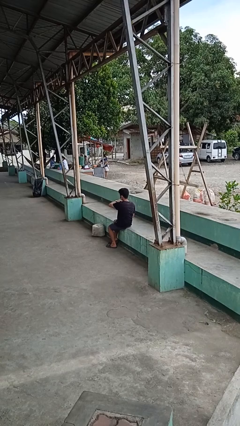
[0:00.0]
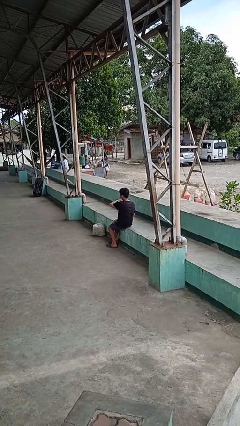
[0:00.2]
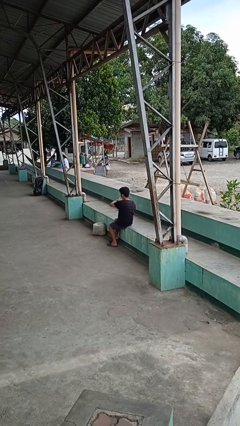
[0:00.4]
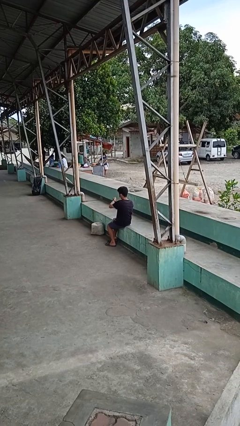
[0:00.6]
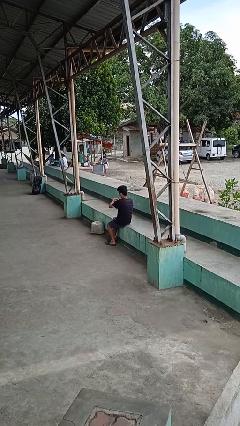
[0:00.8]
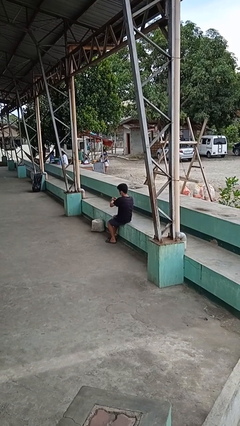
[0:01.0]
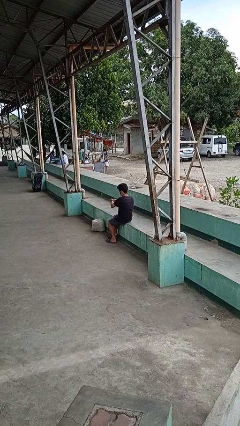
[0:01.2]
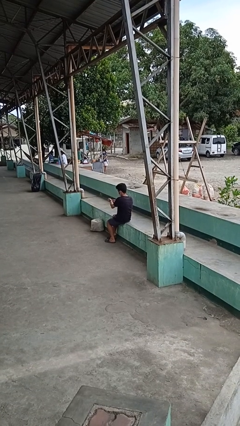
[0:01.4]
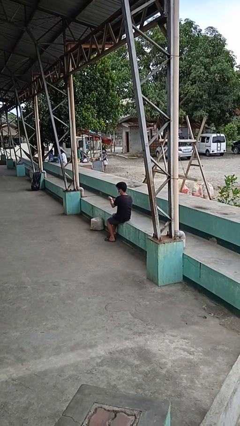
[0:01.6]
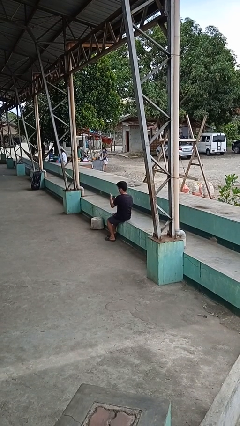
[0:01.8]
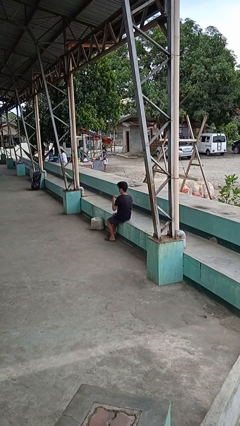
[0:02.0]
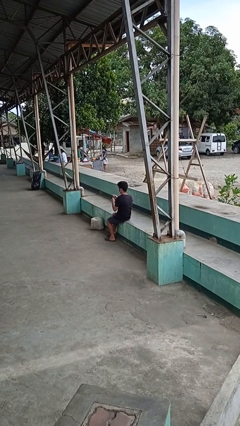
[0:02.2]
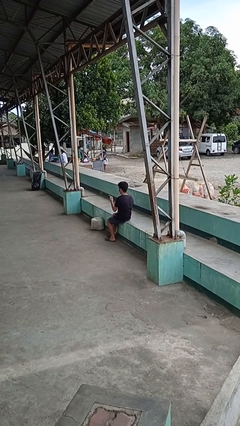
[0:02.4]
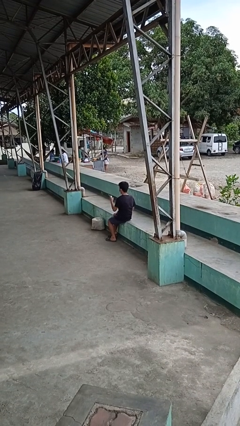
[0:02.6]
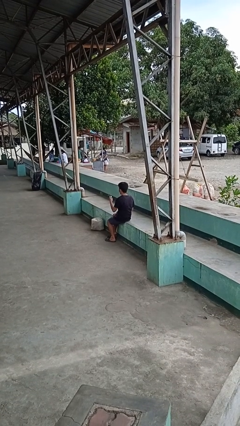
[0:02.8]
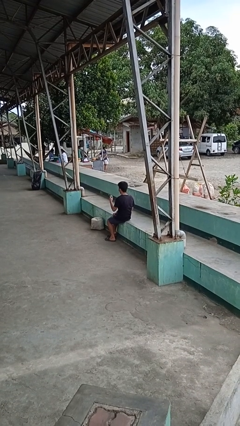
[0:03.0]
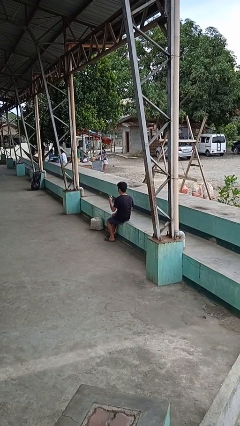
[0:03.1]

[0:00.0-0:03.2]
person takes off wristwatch

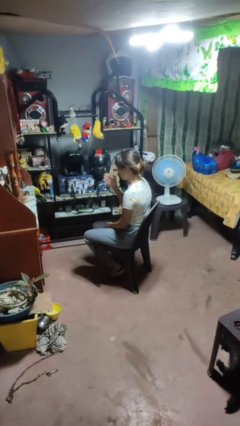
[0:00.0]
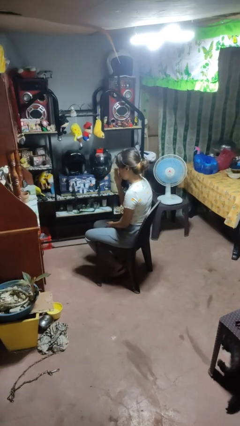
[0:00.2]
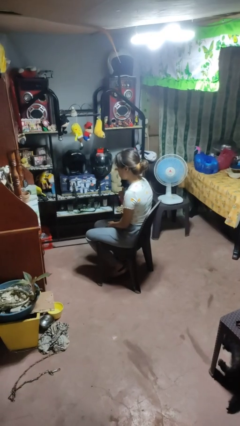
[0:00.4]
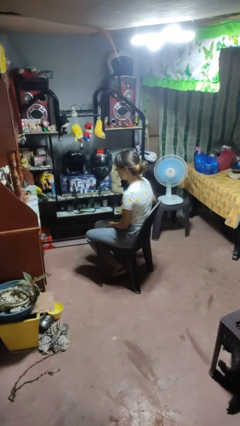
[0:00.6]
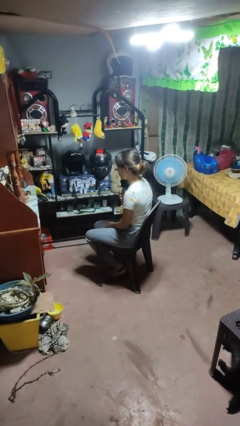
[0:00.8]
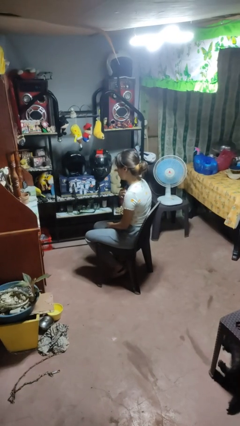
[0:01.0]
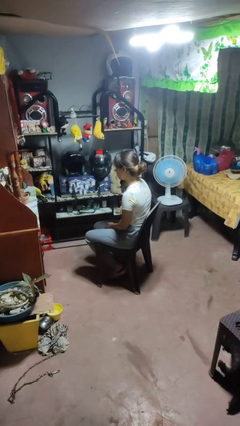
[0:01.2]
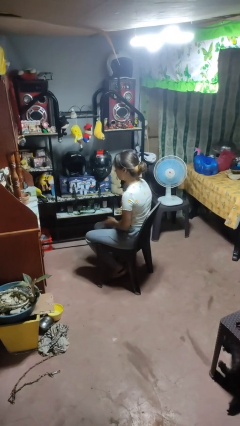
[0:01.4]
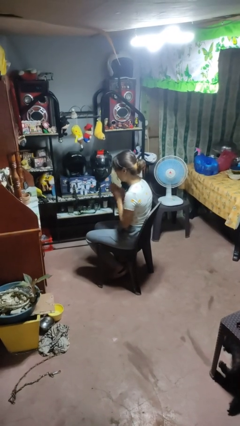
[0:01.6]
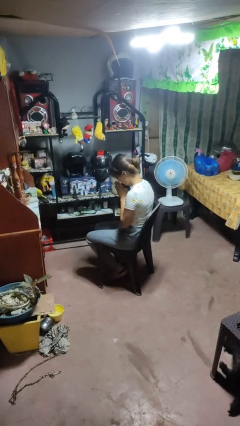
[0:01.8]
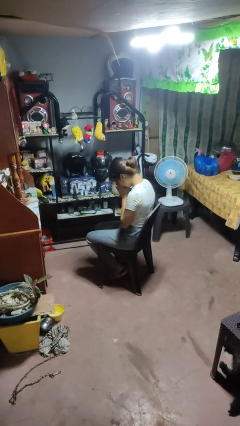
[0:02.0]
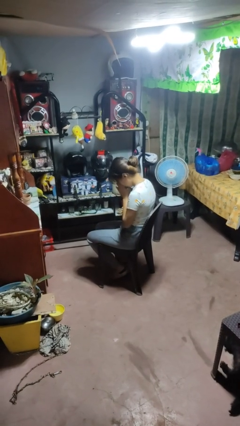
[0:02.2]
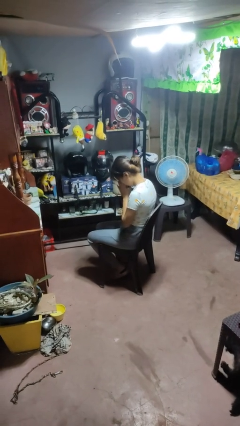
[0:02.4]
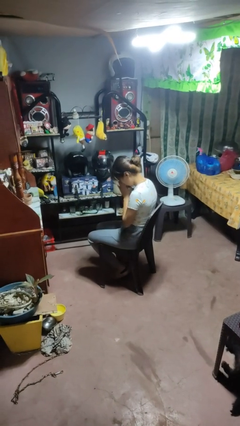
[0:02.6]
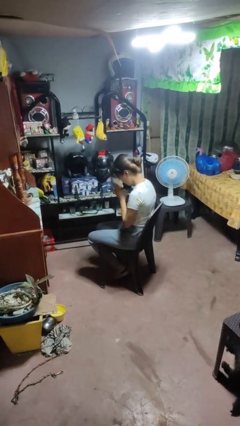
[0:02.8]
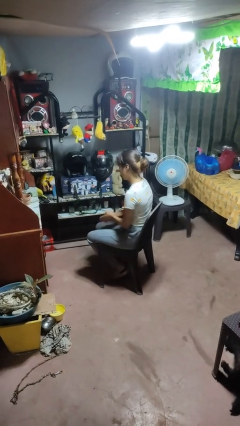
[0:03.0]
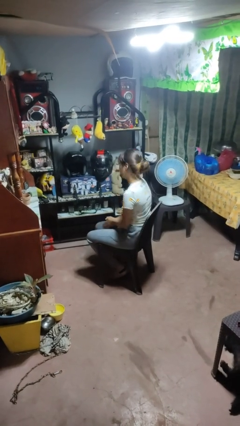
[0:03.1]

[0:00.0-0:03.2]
person prays

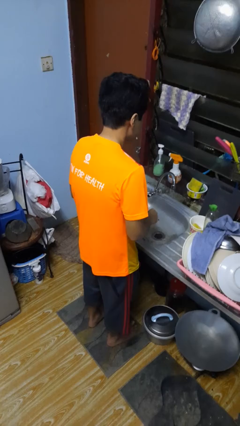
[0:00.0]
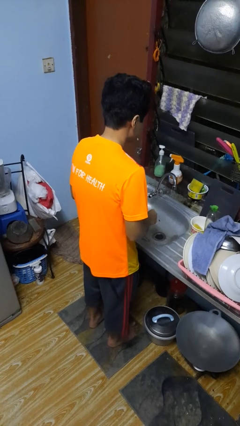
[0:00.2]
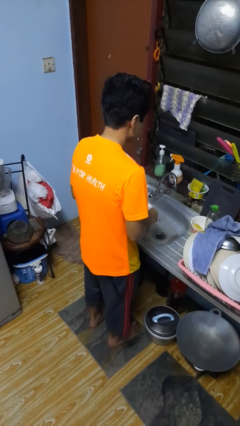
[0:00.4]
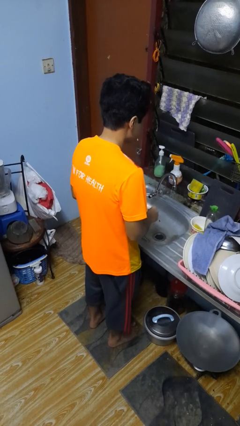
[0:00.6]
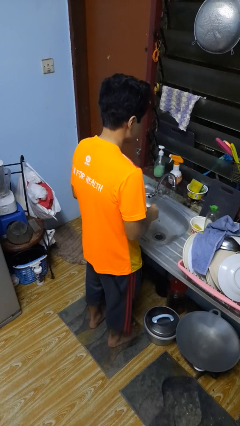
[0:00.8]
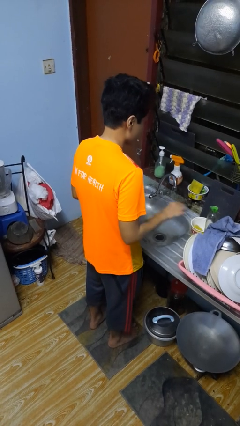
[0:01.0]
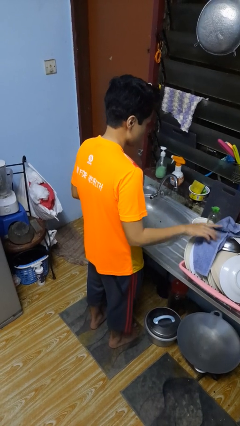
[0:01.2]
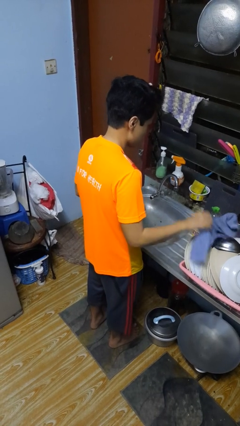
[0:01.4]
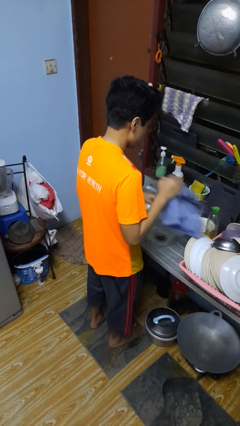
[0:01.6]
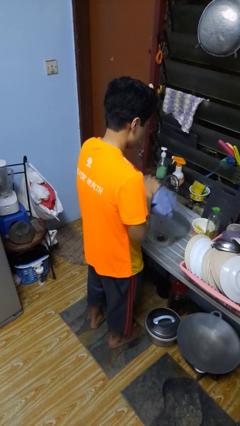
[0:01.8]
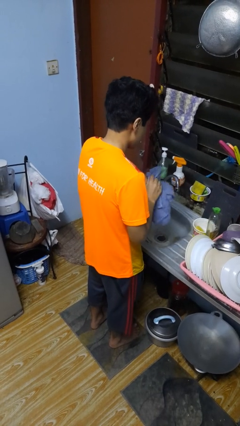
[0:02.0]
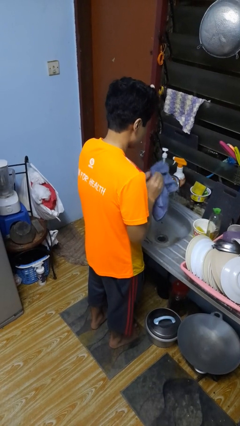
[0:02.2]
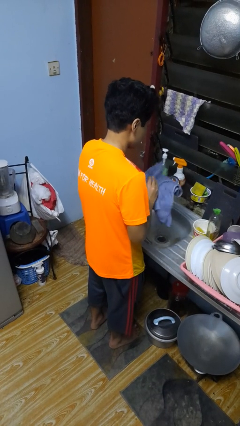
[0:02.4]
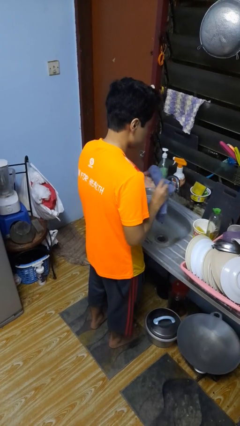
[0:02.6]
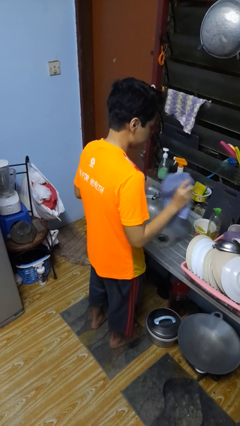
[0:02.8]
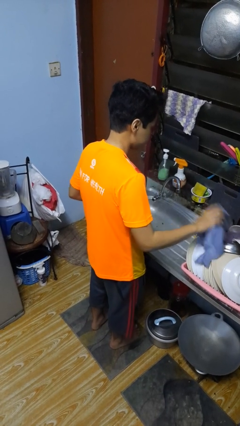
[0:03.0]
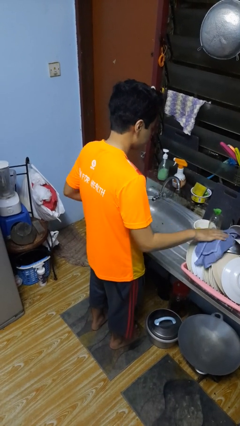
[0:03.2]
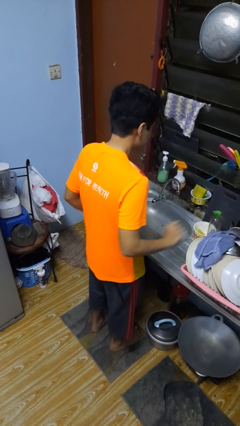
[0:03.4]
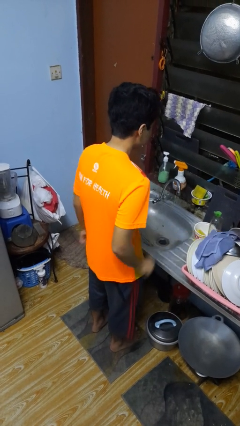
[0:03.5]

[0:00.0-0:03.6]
person dries hands with towel

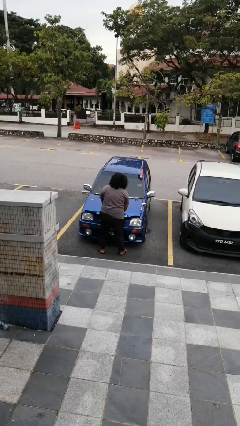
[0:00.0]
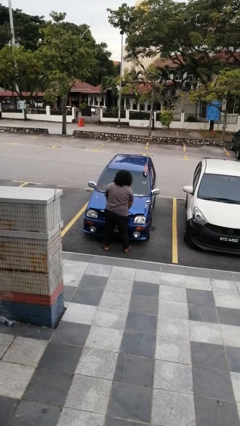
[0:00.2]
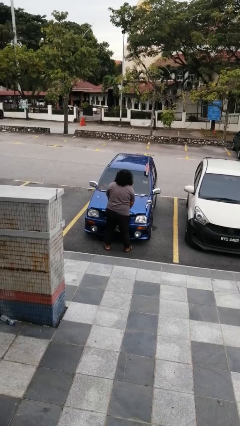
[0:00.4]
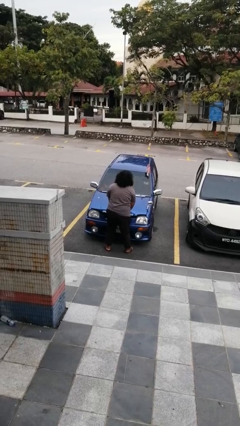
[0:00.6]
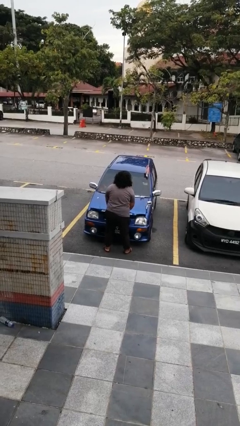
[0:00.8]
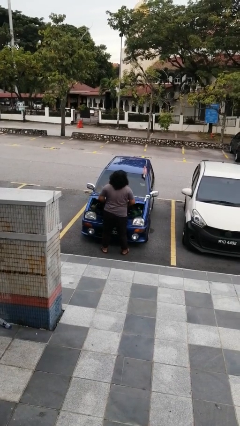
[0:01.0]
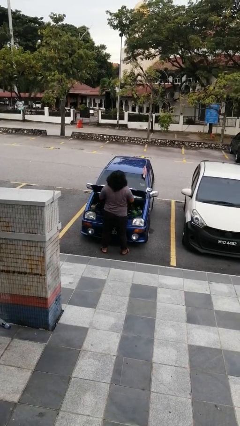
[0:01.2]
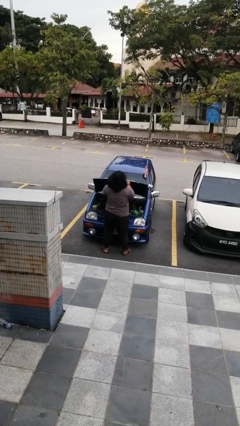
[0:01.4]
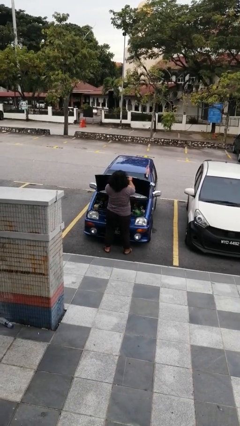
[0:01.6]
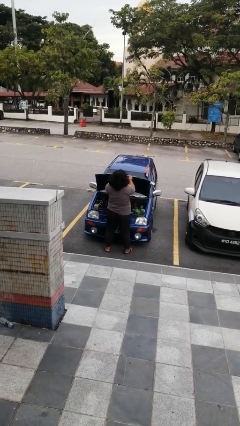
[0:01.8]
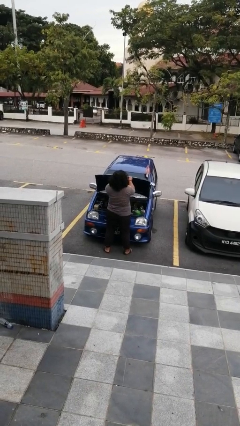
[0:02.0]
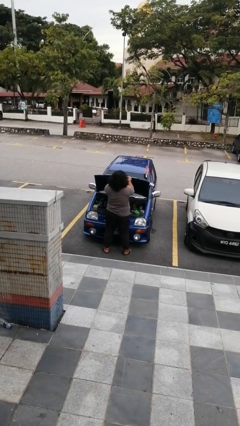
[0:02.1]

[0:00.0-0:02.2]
person opens car hood

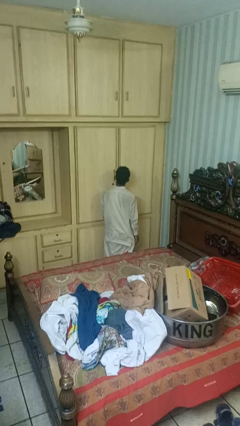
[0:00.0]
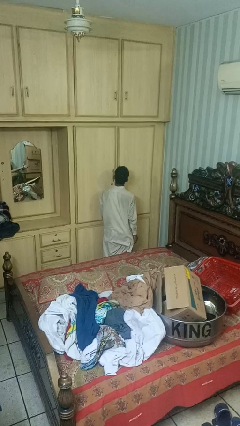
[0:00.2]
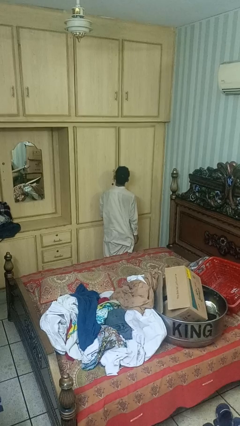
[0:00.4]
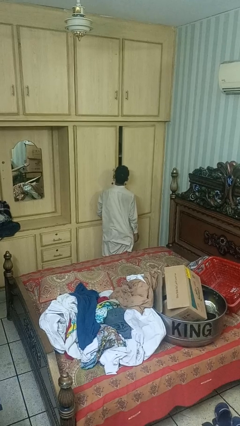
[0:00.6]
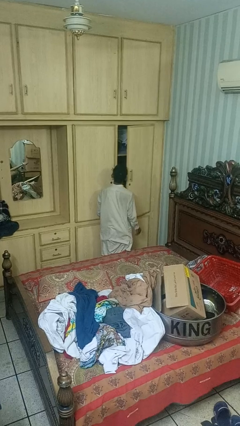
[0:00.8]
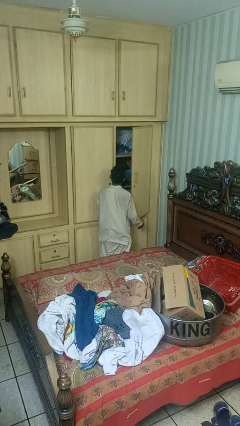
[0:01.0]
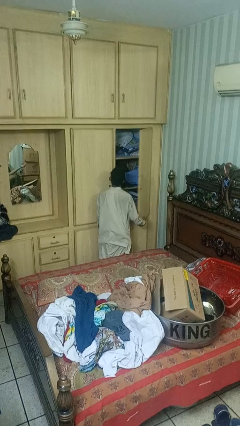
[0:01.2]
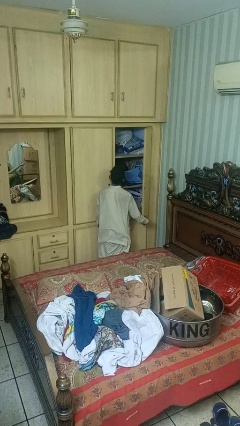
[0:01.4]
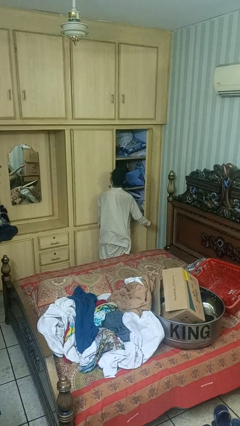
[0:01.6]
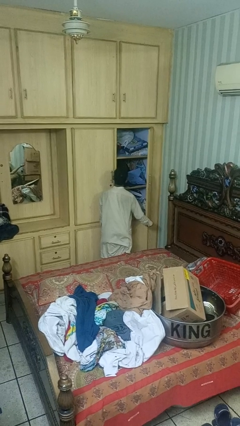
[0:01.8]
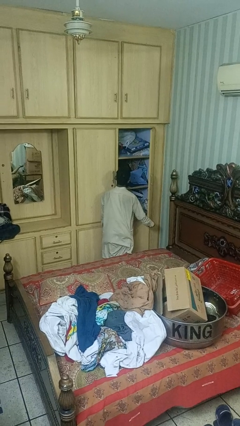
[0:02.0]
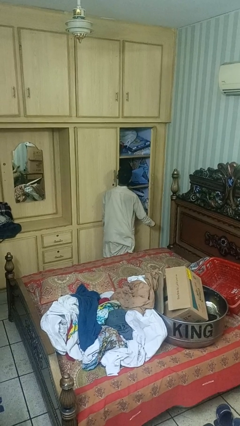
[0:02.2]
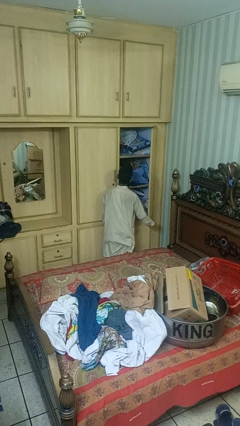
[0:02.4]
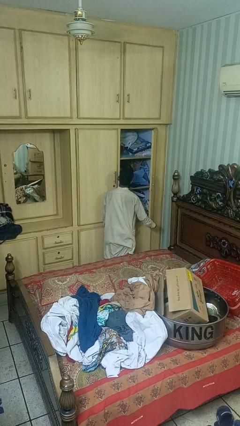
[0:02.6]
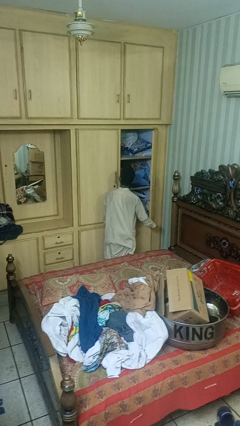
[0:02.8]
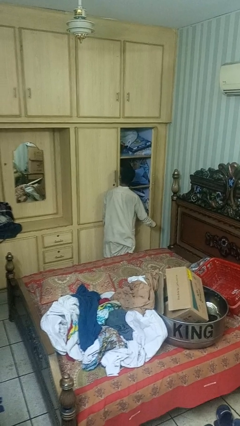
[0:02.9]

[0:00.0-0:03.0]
person opens closet door

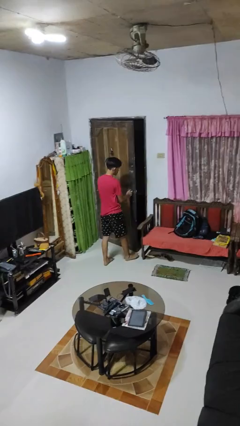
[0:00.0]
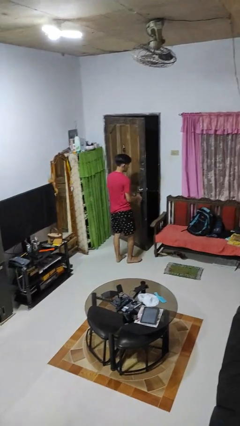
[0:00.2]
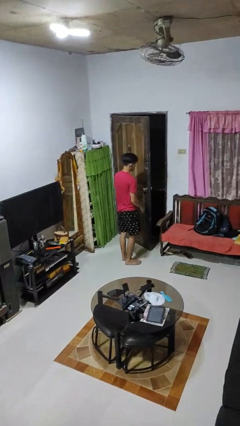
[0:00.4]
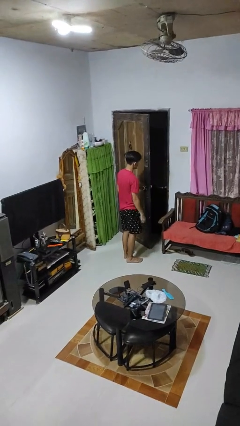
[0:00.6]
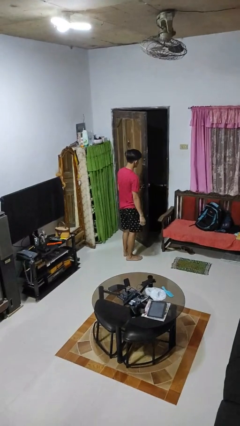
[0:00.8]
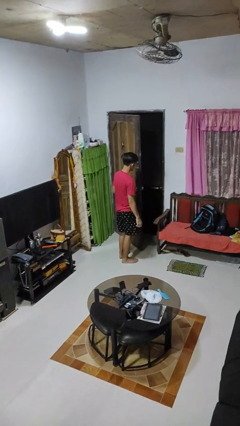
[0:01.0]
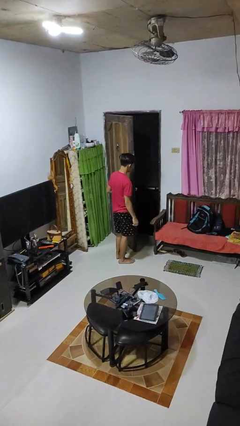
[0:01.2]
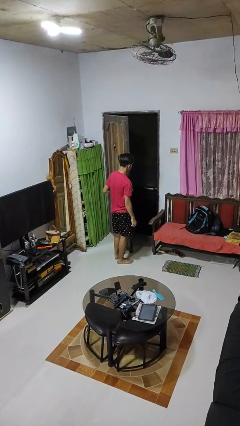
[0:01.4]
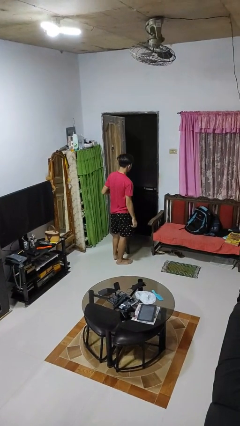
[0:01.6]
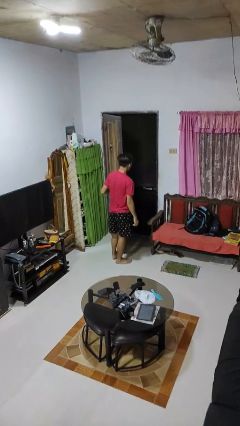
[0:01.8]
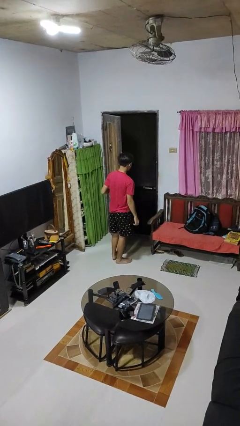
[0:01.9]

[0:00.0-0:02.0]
person opens facility door

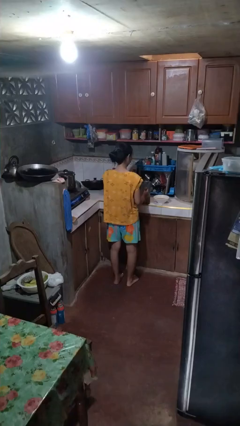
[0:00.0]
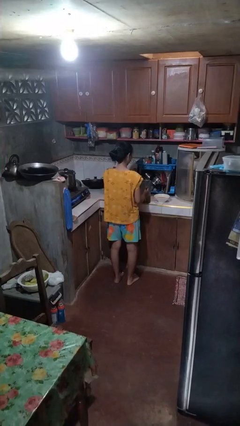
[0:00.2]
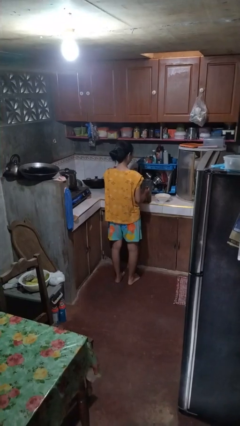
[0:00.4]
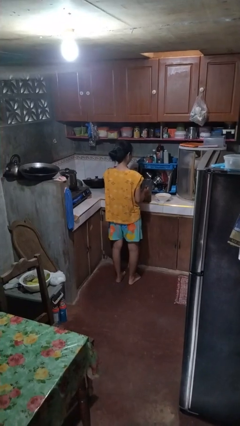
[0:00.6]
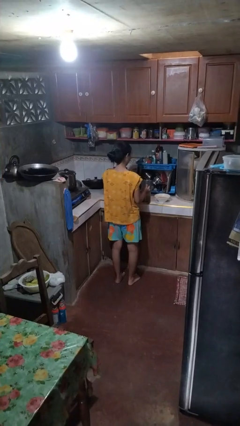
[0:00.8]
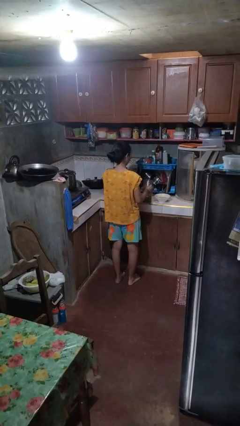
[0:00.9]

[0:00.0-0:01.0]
person pours into bowl
